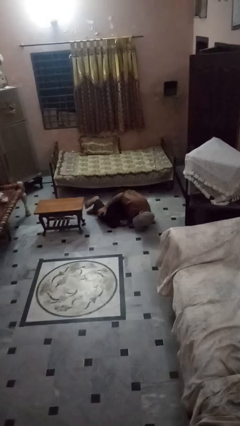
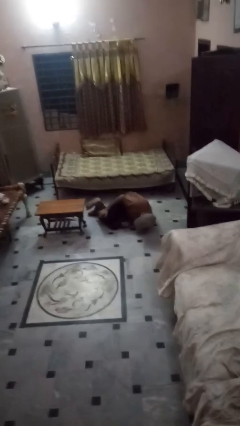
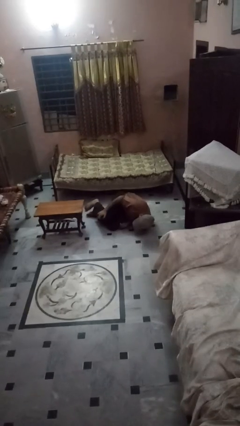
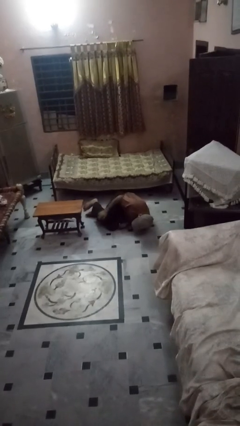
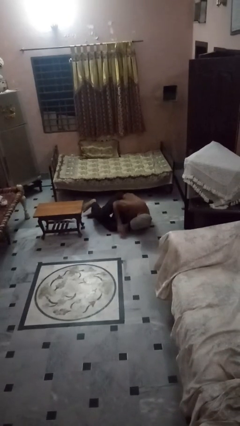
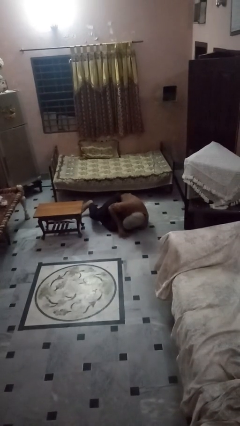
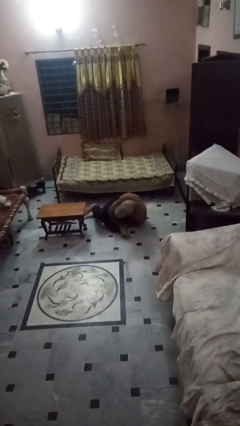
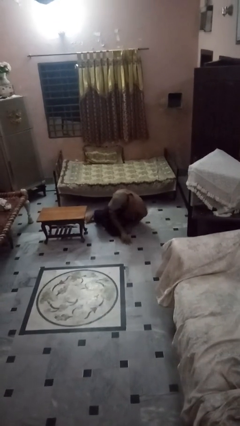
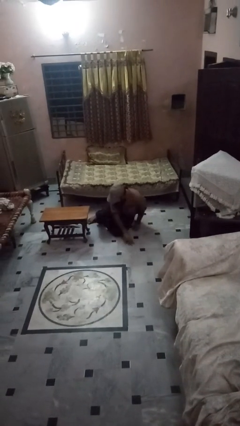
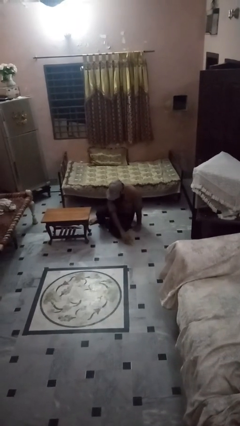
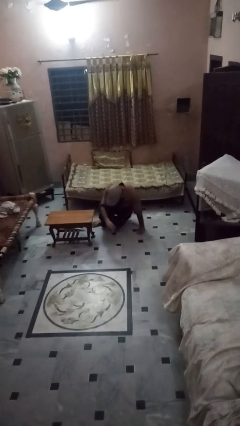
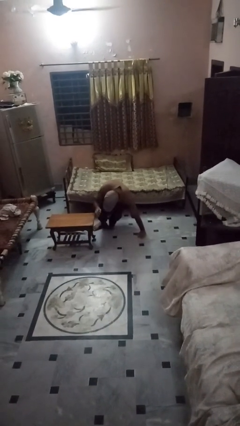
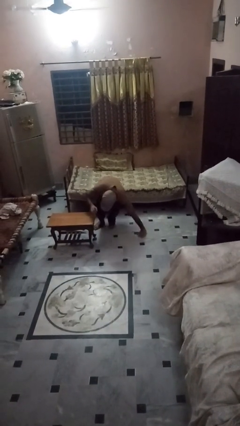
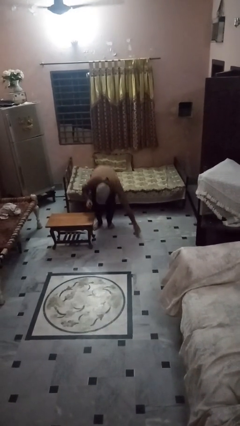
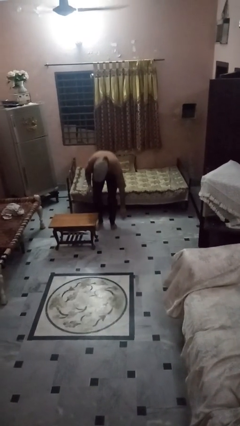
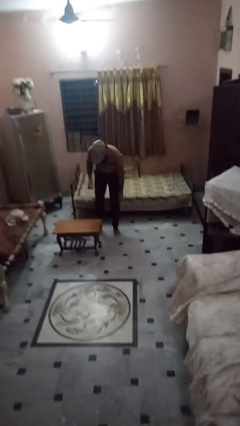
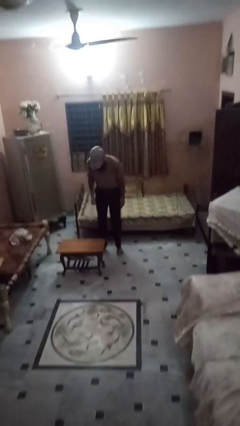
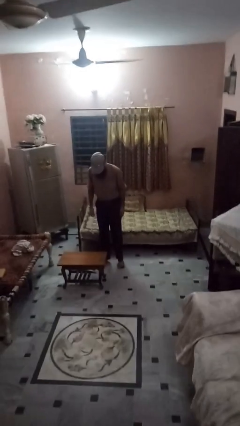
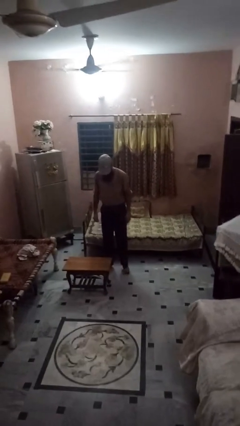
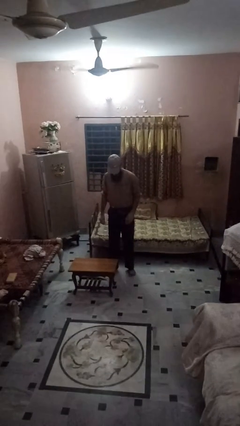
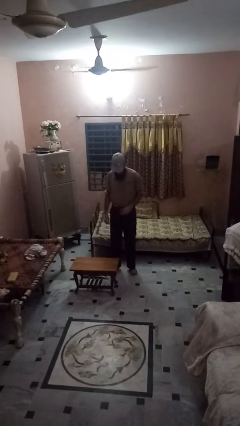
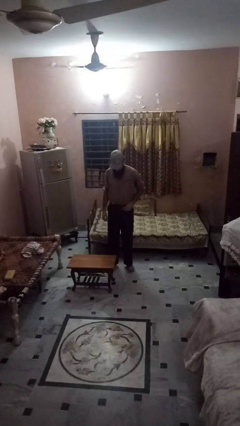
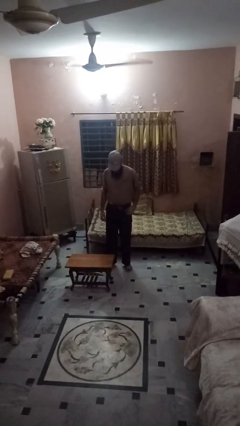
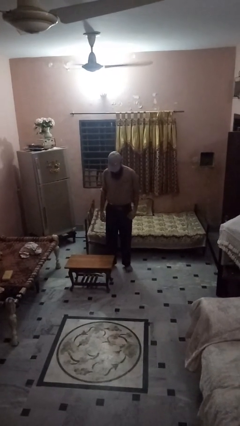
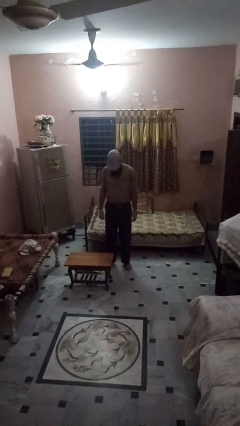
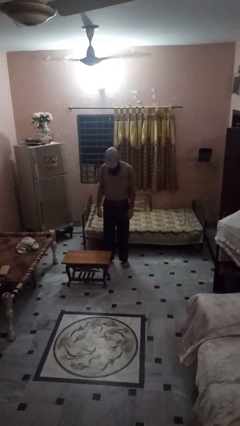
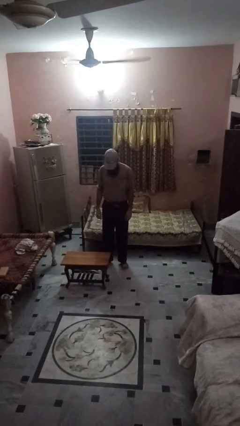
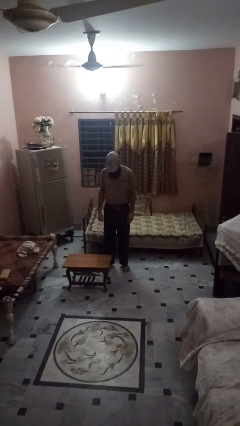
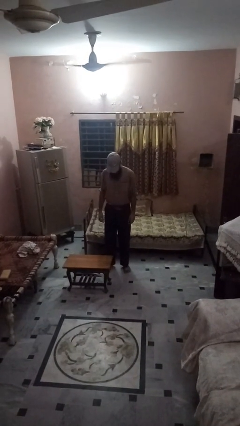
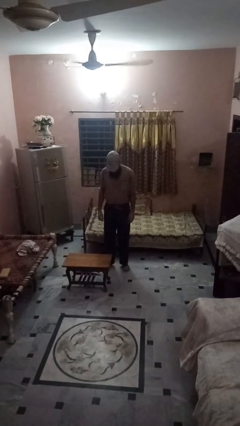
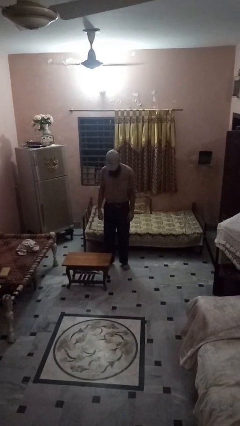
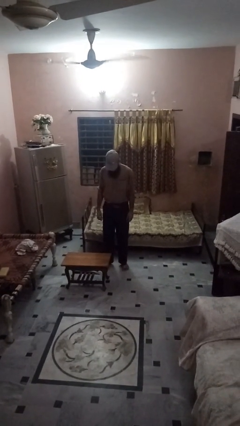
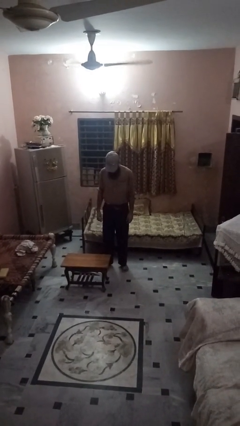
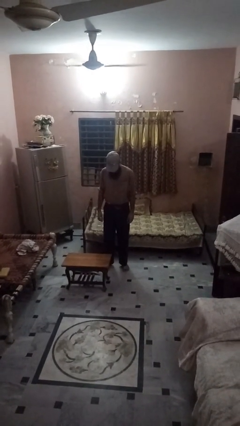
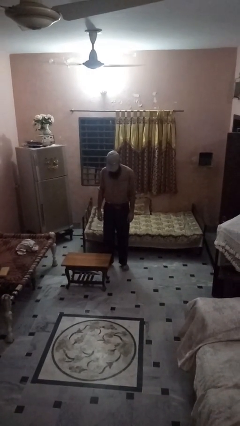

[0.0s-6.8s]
person stands up from floor

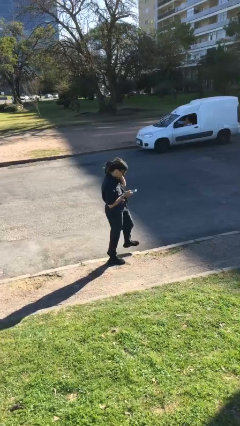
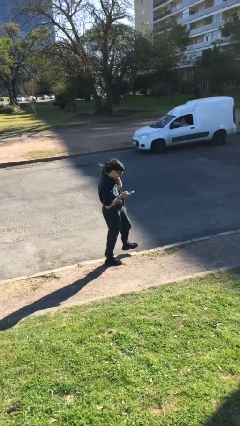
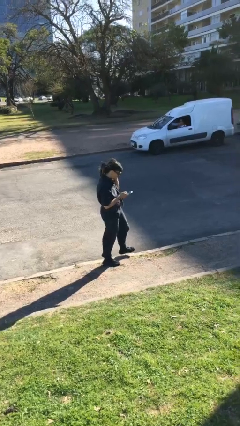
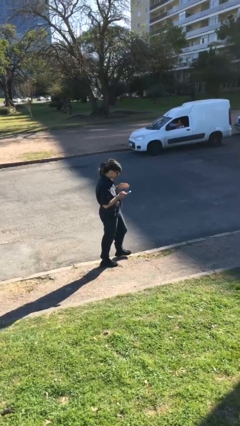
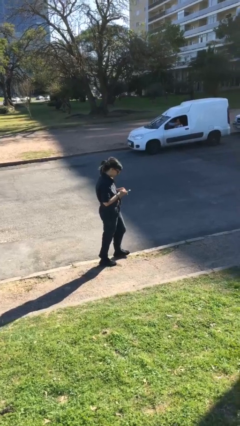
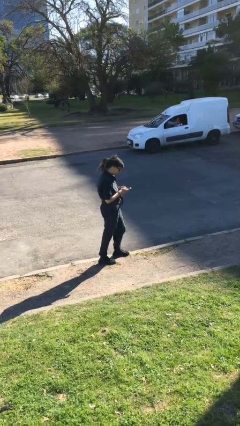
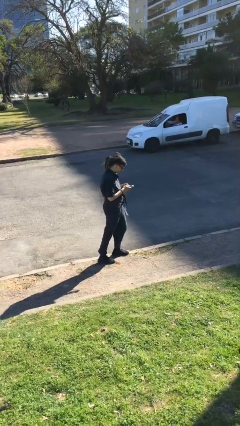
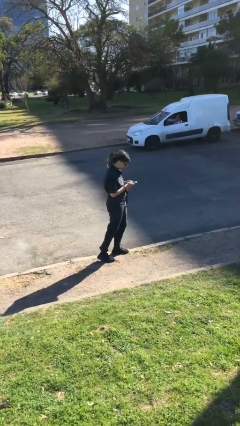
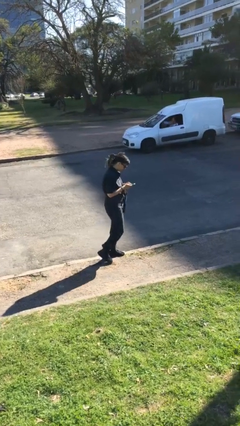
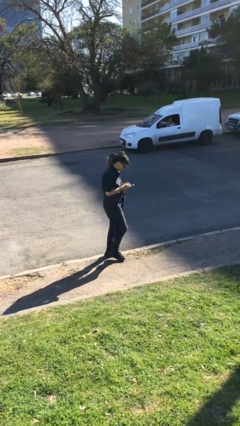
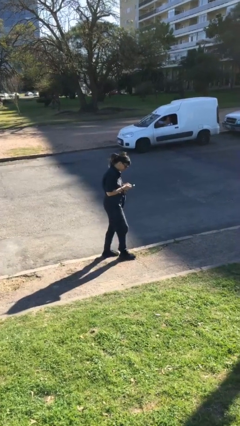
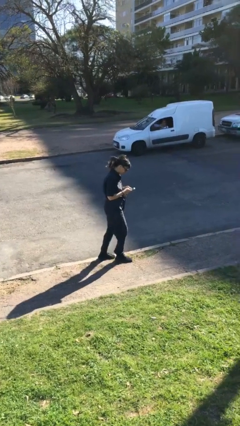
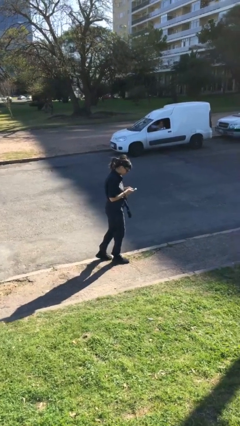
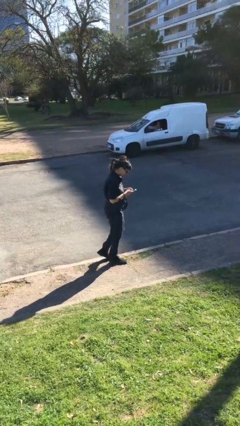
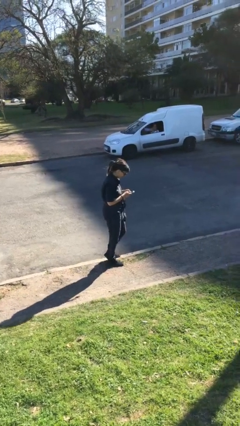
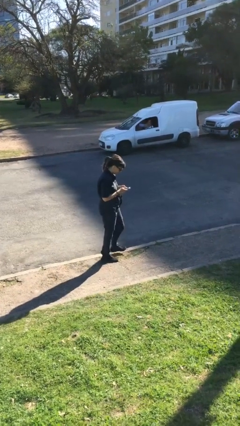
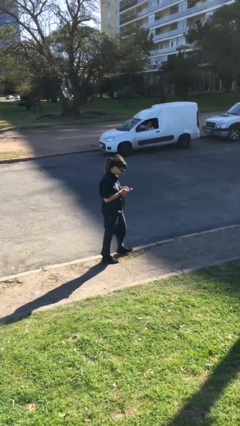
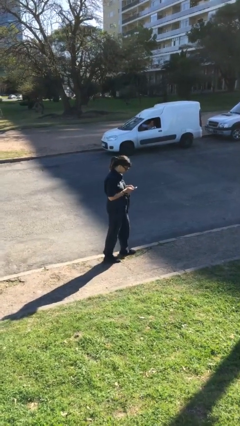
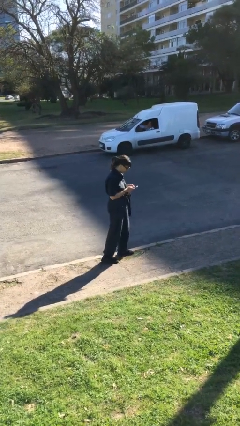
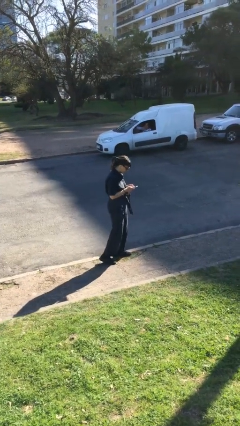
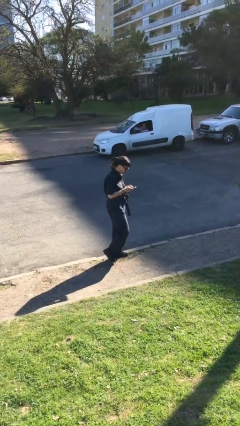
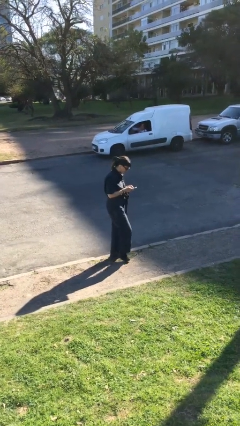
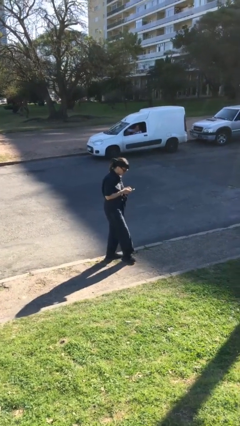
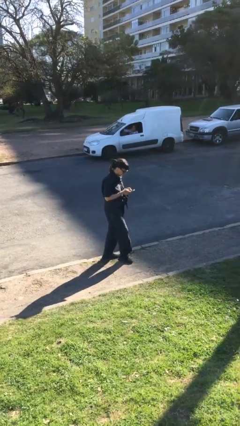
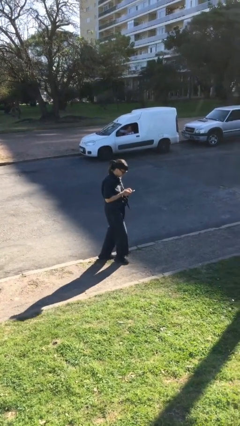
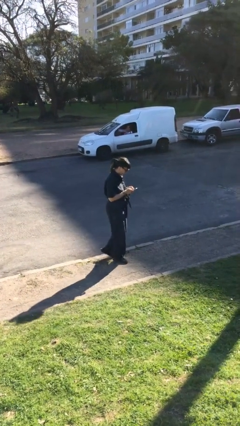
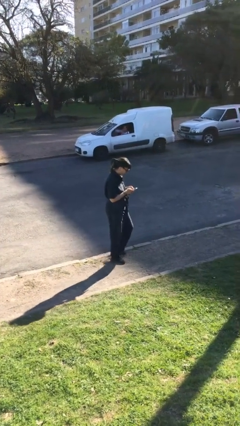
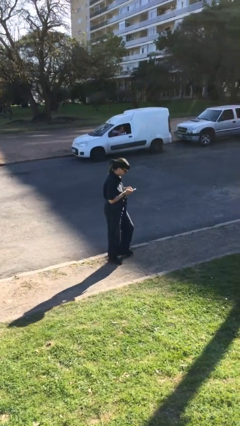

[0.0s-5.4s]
person texts on phone

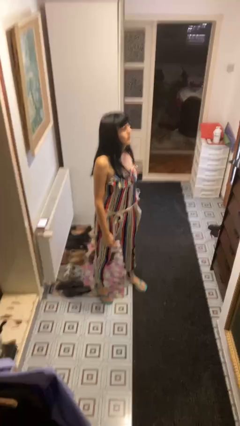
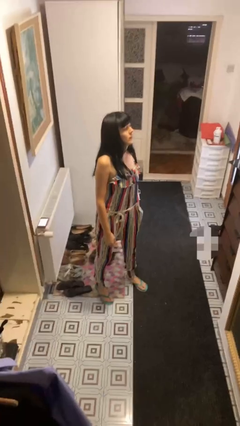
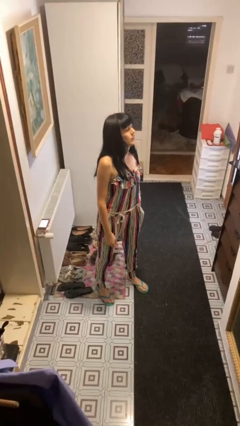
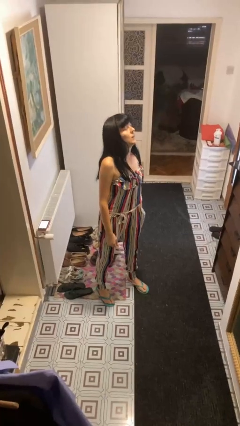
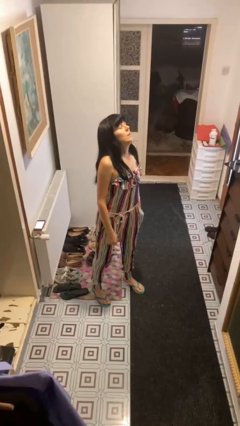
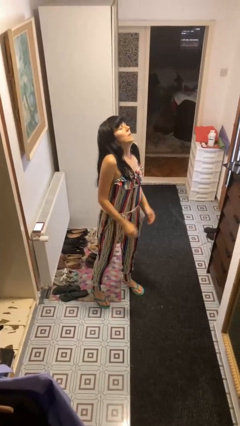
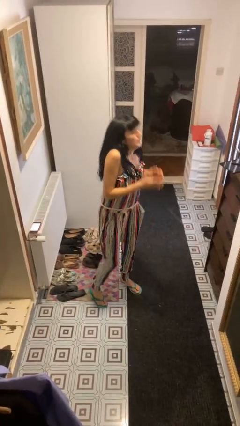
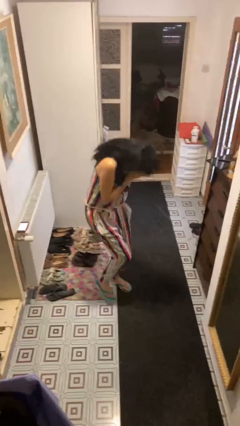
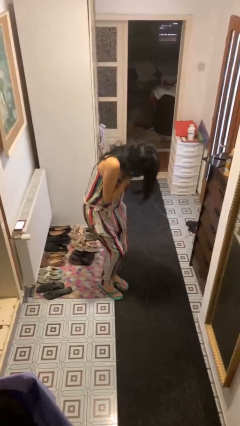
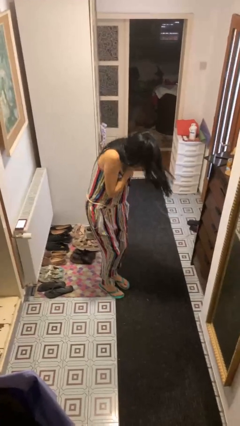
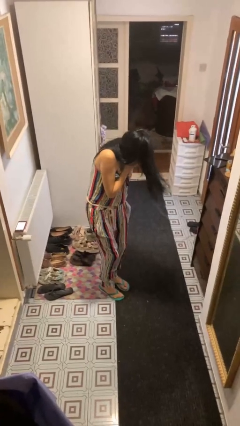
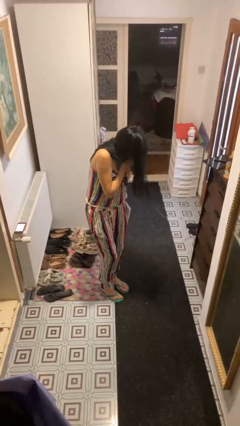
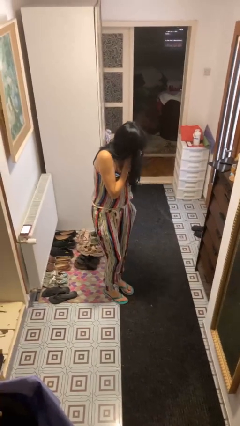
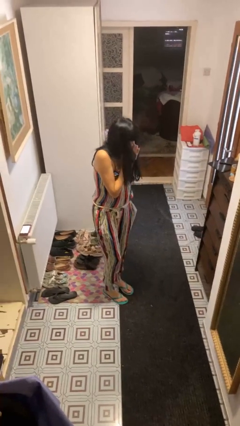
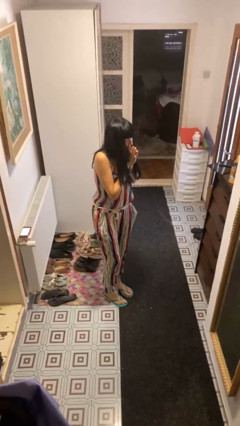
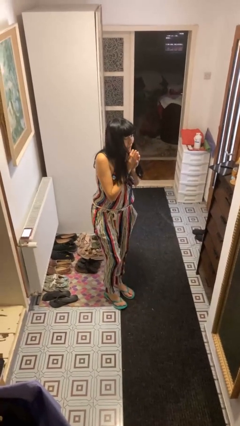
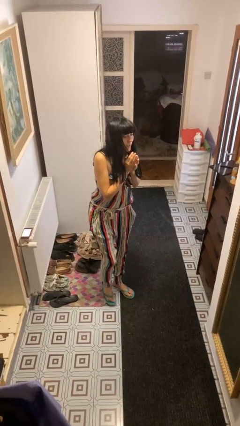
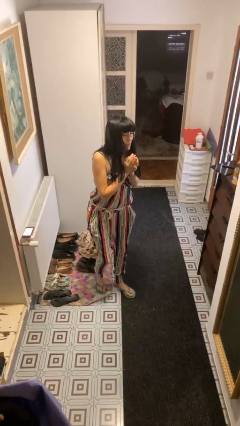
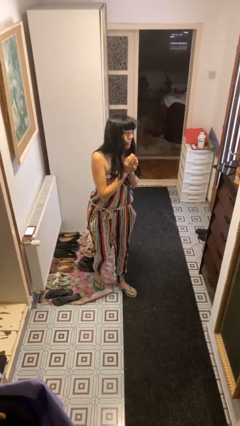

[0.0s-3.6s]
person sneezes into hand

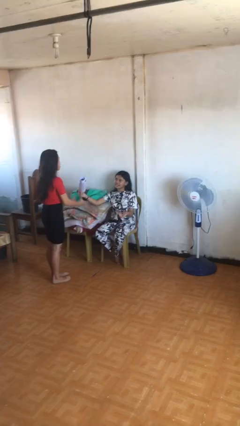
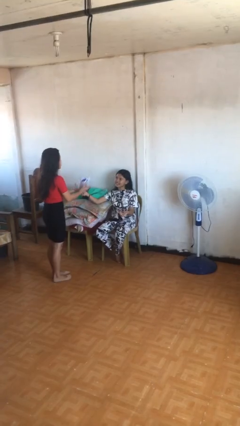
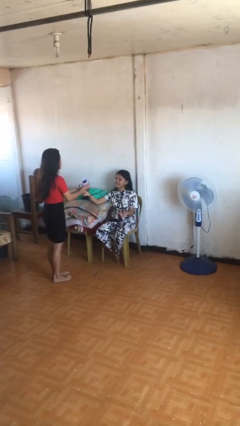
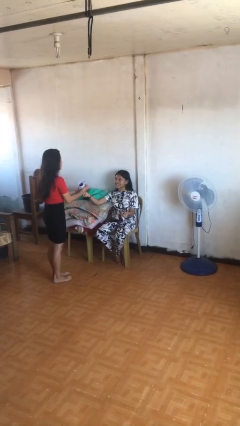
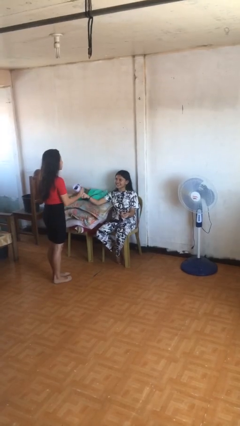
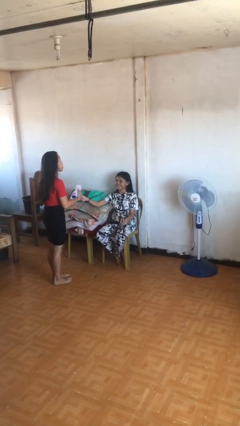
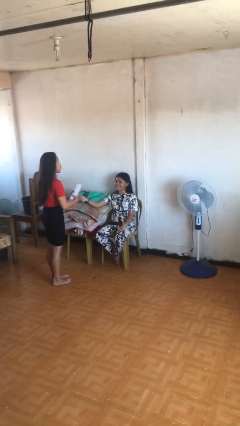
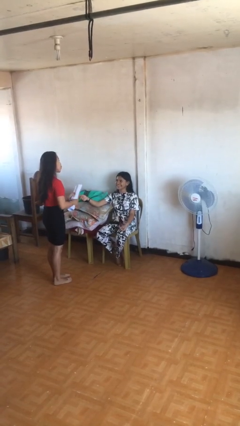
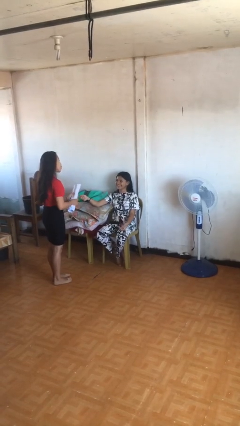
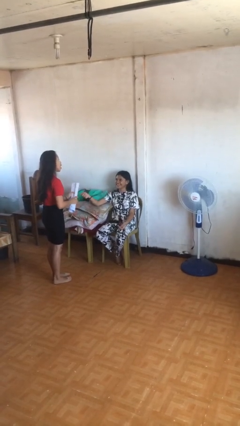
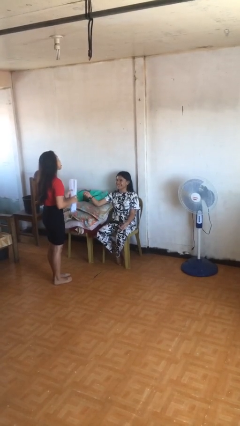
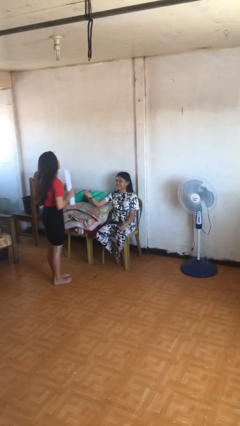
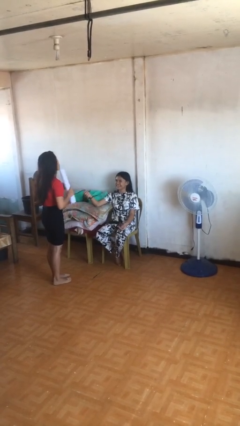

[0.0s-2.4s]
person transfers object to person
